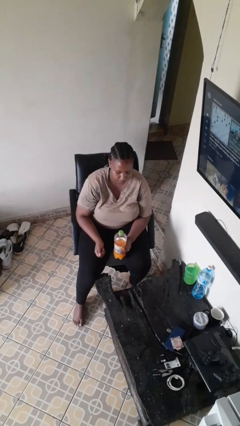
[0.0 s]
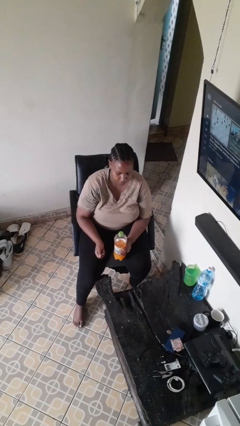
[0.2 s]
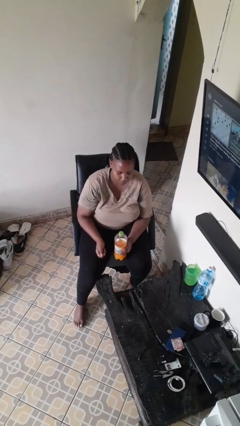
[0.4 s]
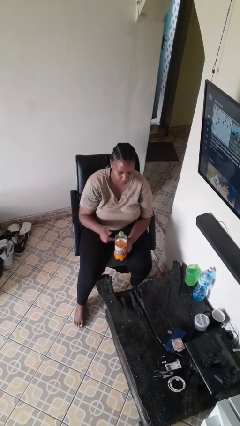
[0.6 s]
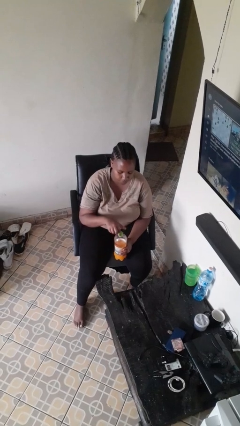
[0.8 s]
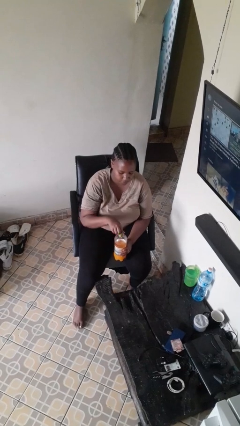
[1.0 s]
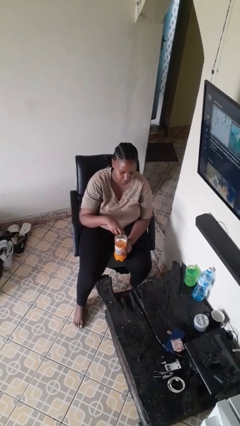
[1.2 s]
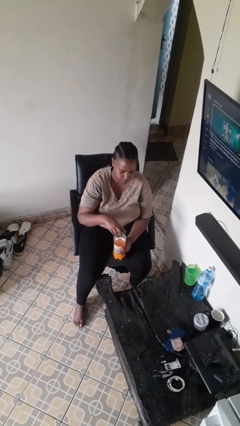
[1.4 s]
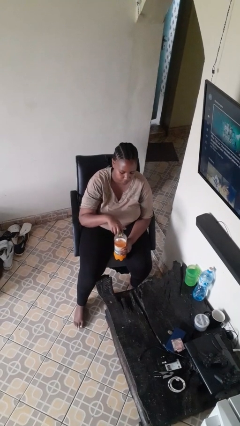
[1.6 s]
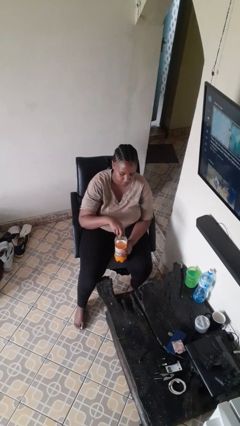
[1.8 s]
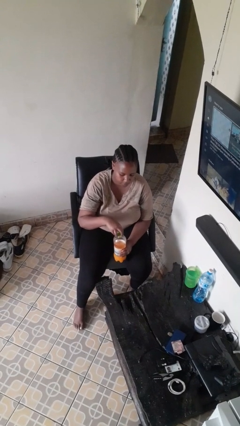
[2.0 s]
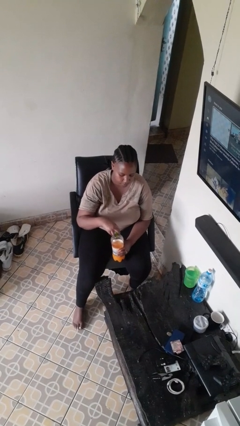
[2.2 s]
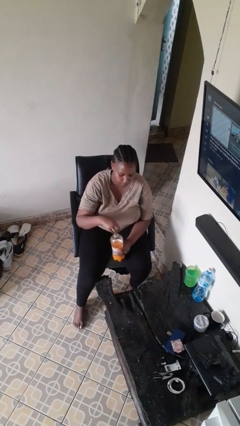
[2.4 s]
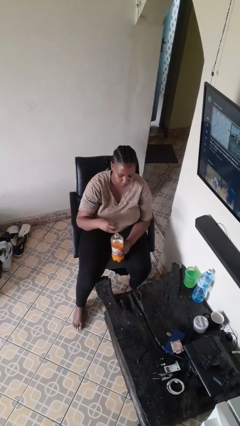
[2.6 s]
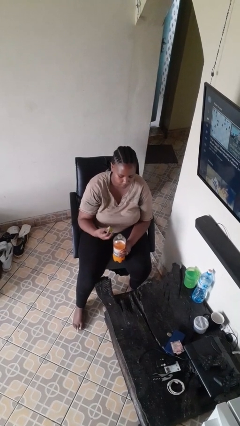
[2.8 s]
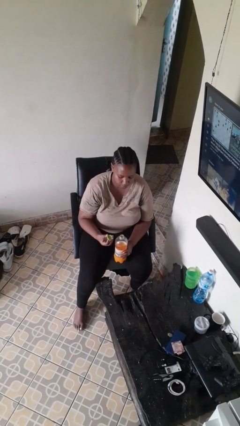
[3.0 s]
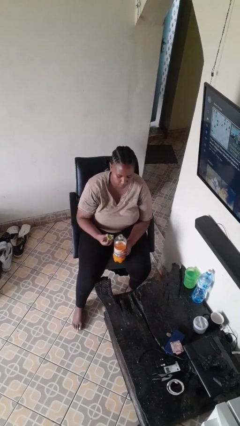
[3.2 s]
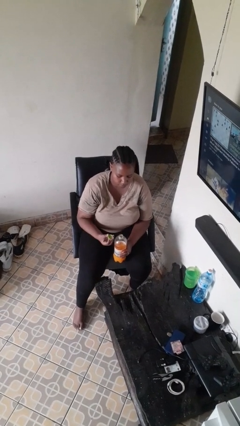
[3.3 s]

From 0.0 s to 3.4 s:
person unscrews lid from bottle

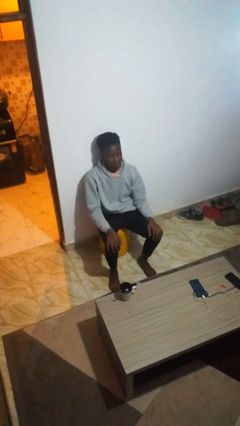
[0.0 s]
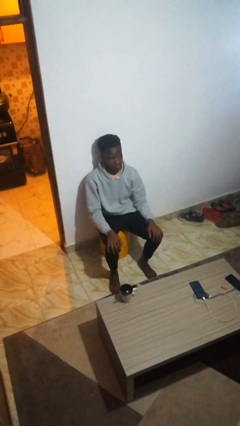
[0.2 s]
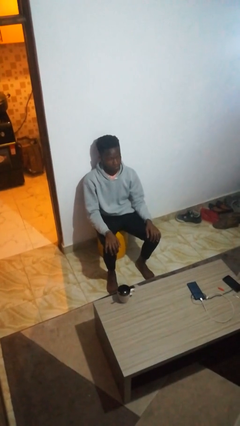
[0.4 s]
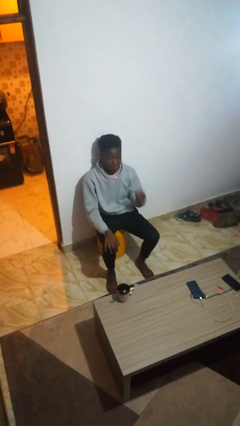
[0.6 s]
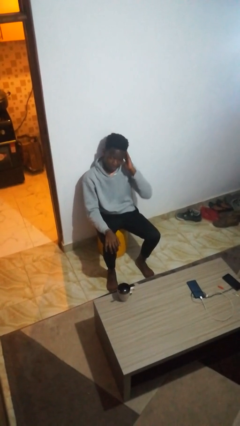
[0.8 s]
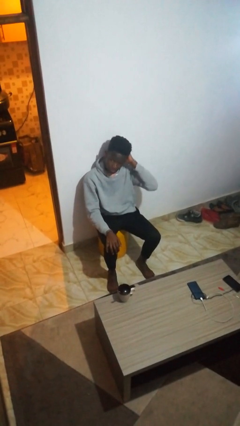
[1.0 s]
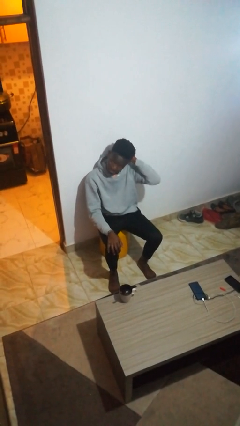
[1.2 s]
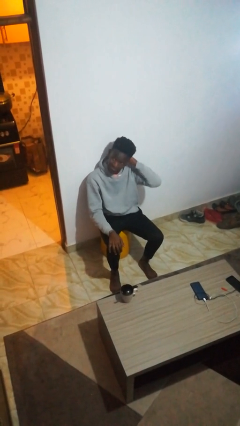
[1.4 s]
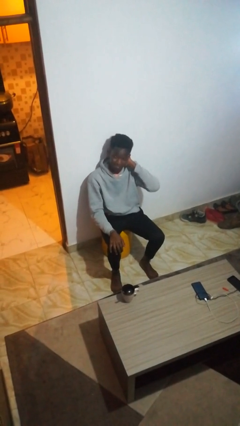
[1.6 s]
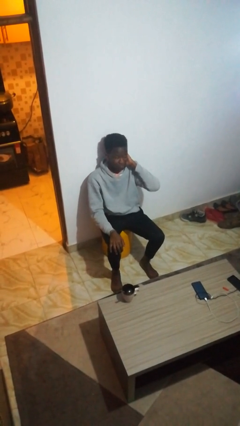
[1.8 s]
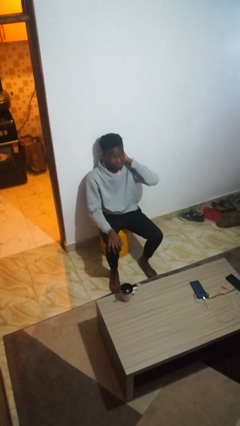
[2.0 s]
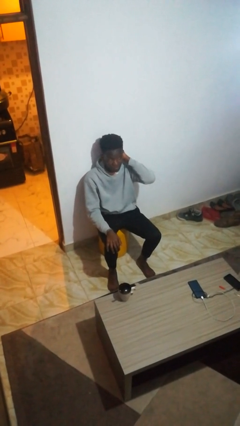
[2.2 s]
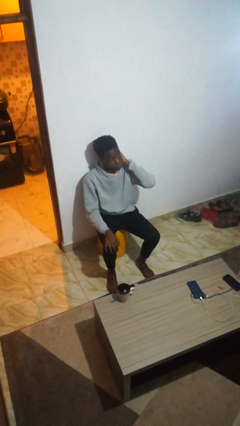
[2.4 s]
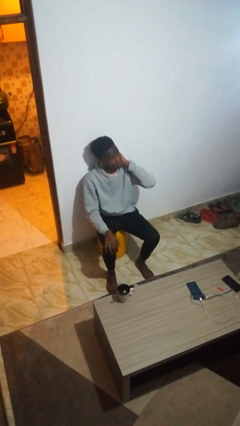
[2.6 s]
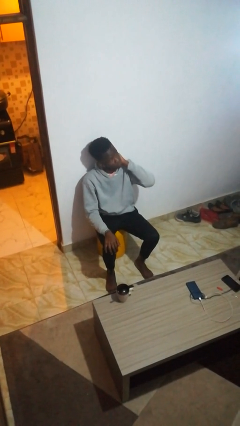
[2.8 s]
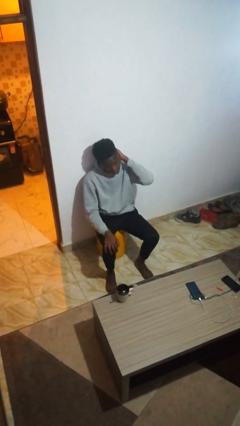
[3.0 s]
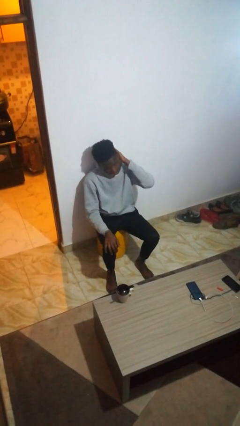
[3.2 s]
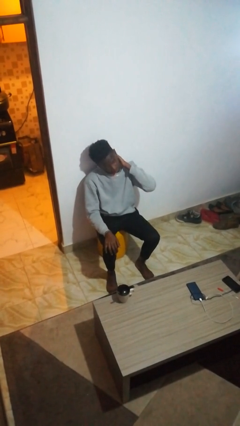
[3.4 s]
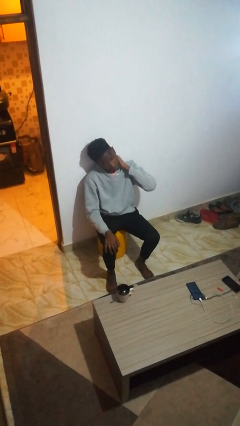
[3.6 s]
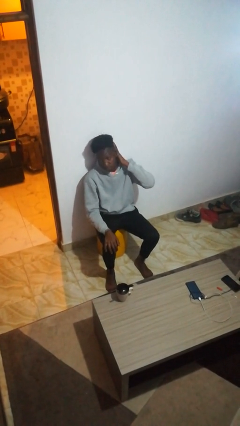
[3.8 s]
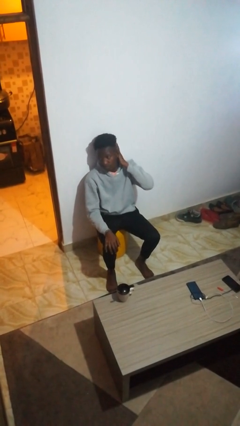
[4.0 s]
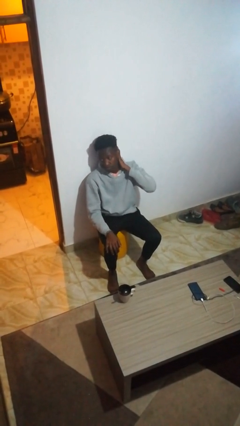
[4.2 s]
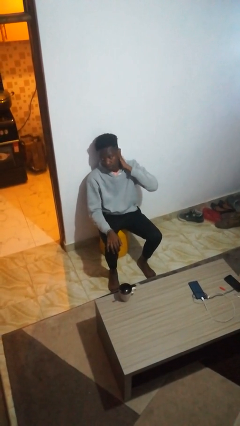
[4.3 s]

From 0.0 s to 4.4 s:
person strokes hair

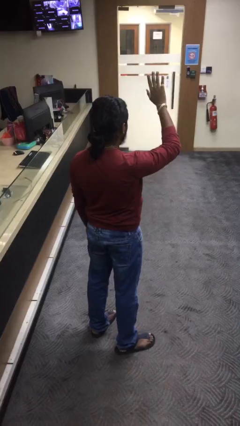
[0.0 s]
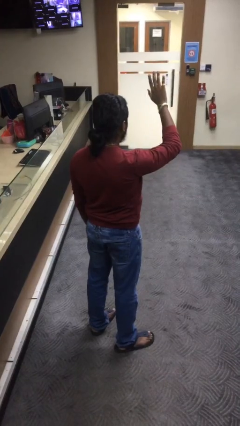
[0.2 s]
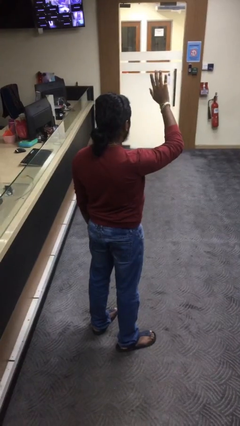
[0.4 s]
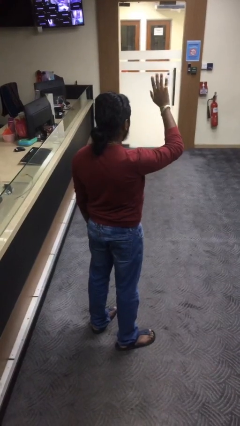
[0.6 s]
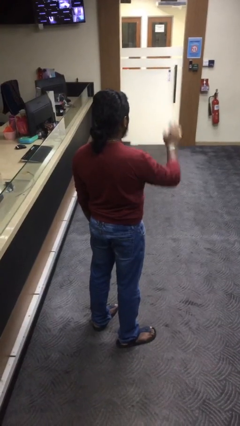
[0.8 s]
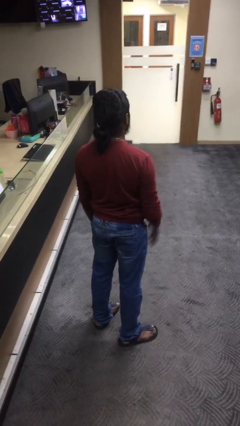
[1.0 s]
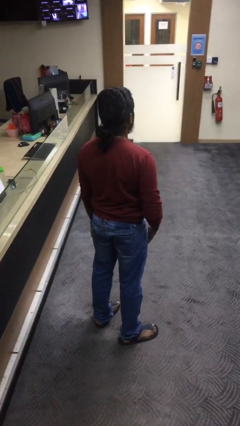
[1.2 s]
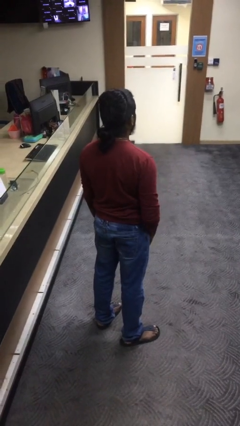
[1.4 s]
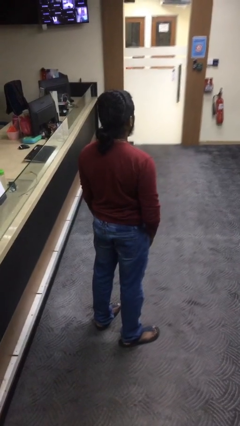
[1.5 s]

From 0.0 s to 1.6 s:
person gestures lower hand

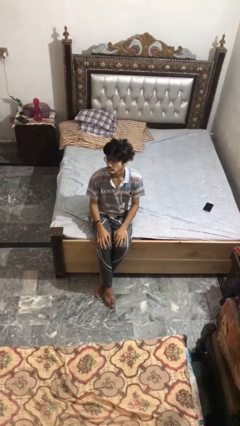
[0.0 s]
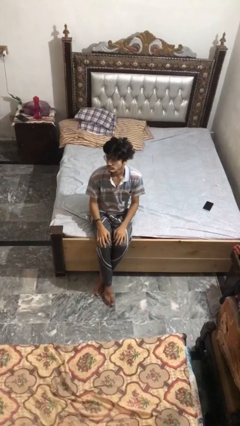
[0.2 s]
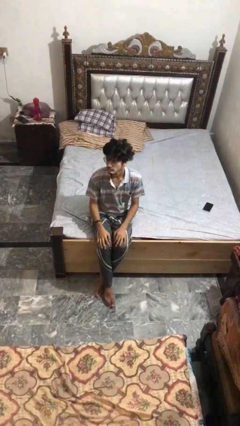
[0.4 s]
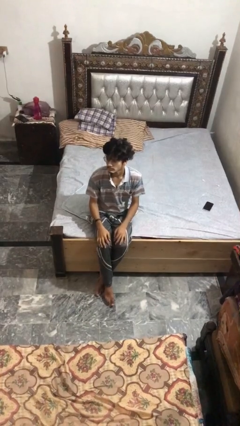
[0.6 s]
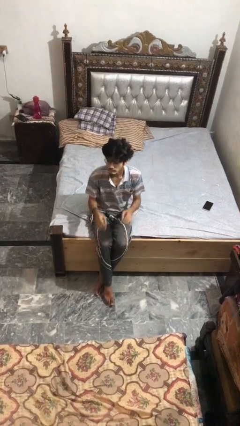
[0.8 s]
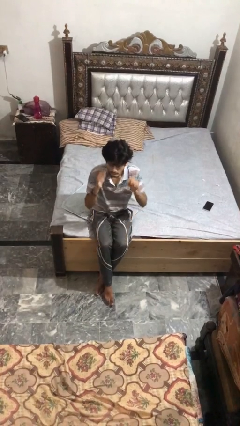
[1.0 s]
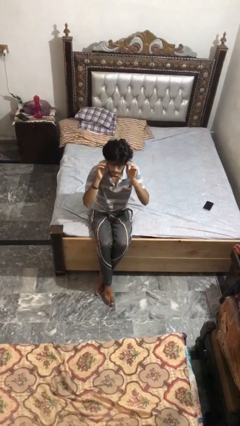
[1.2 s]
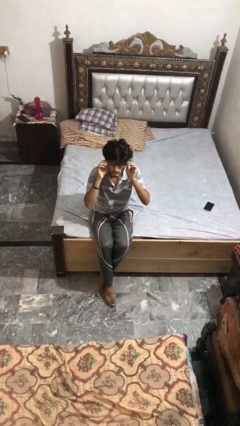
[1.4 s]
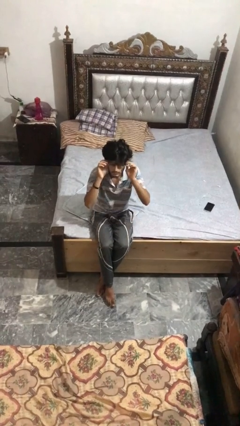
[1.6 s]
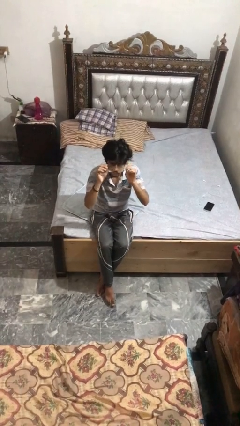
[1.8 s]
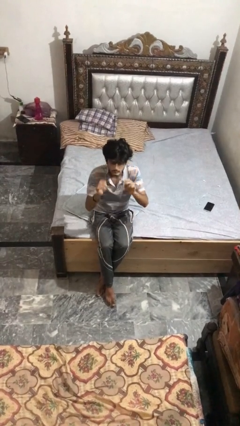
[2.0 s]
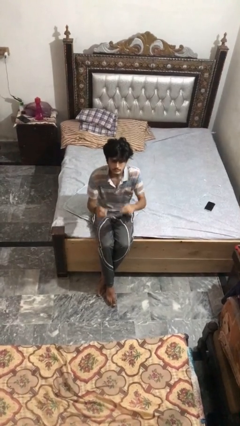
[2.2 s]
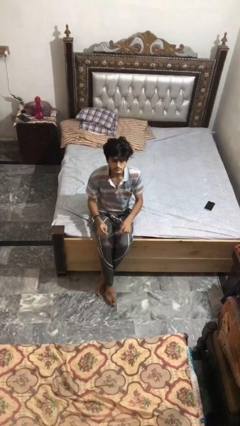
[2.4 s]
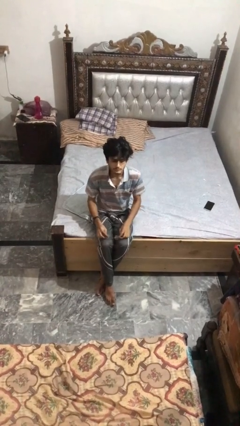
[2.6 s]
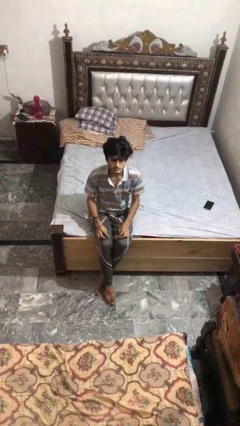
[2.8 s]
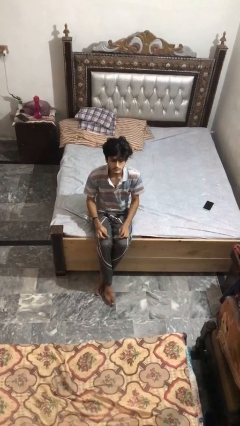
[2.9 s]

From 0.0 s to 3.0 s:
person takes off glasses

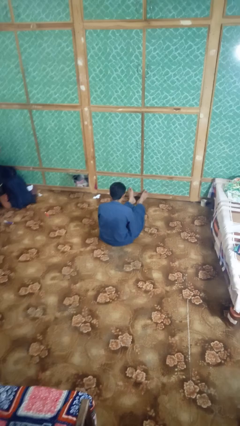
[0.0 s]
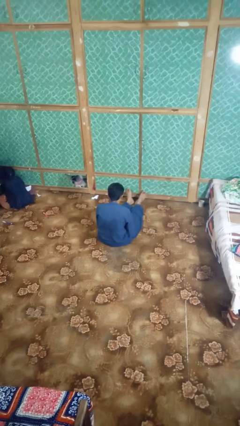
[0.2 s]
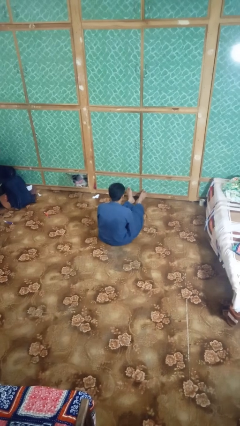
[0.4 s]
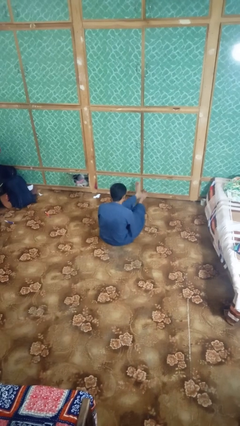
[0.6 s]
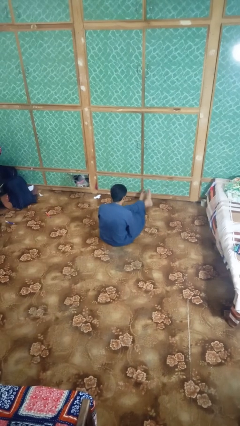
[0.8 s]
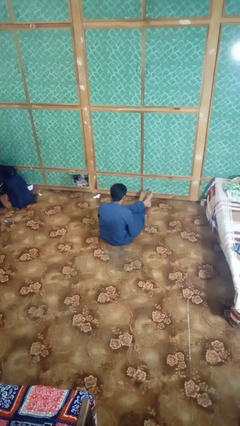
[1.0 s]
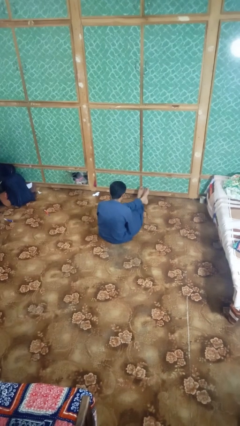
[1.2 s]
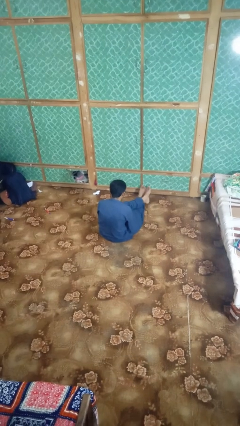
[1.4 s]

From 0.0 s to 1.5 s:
person crosses legs

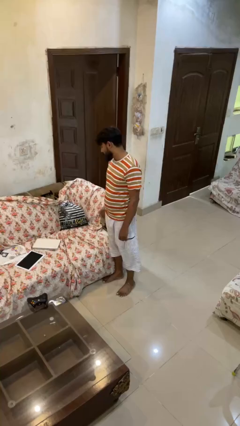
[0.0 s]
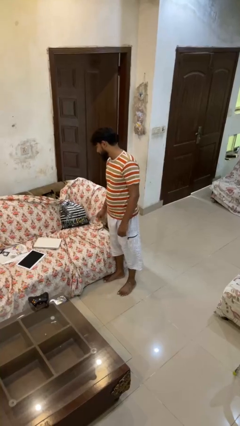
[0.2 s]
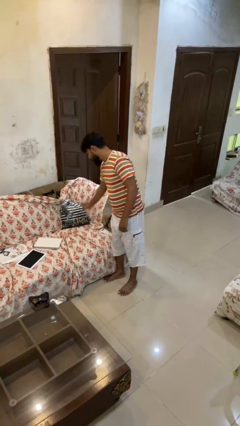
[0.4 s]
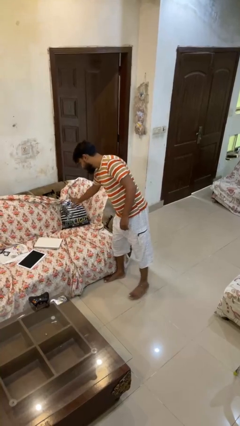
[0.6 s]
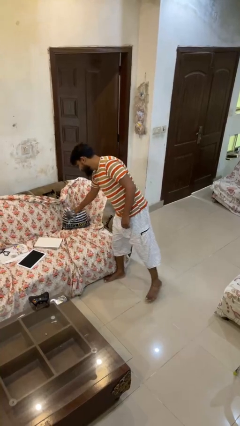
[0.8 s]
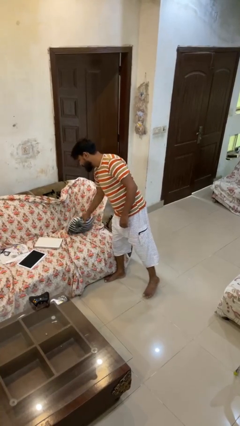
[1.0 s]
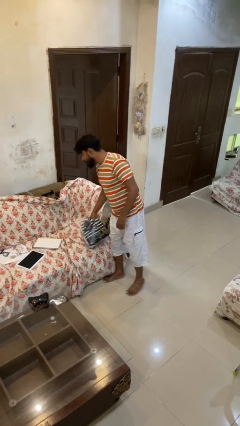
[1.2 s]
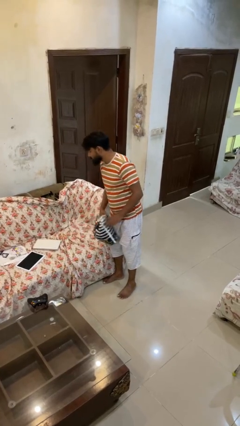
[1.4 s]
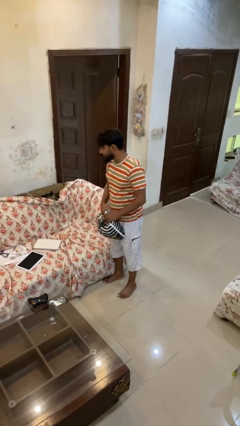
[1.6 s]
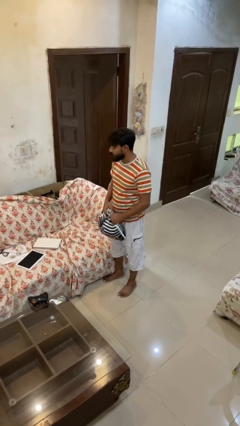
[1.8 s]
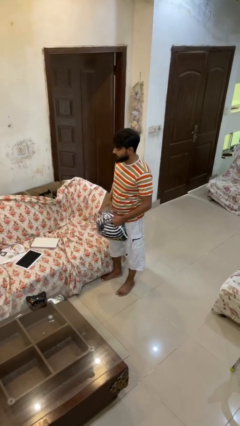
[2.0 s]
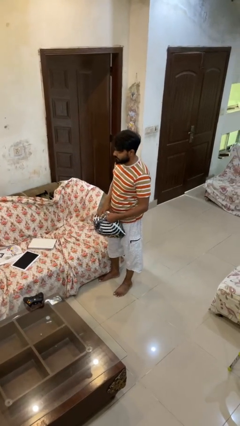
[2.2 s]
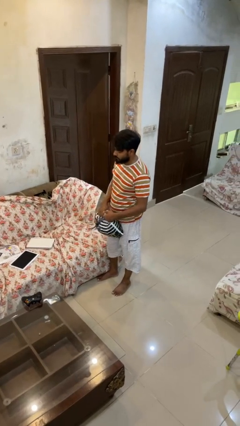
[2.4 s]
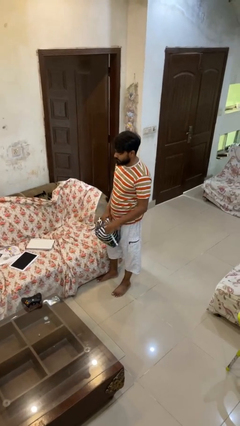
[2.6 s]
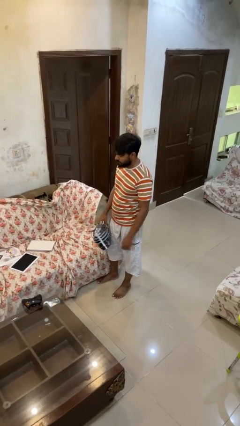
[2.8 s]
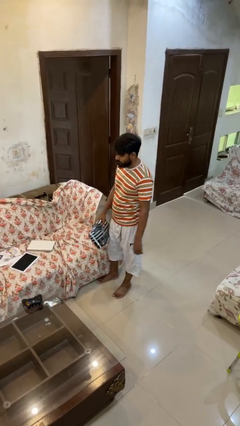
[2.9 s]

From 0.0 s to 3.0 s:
person picks up object from couch

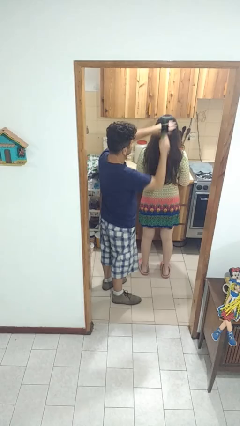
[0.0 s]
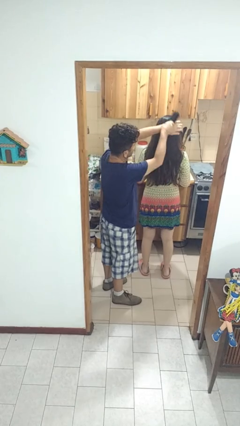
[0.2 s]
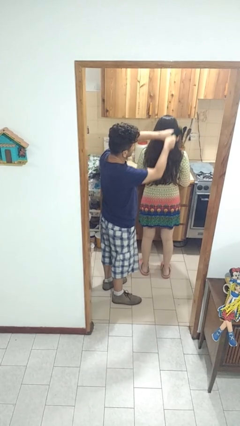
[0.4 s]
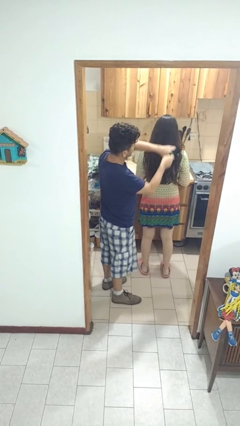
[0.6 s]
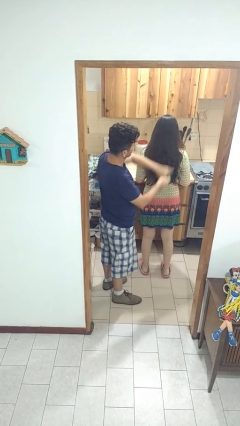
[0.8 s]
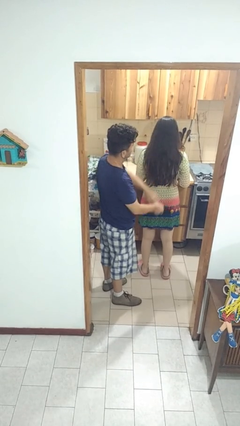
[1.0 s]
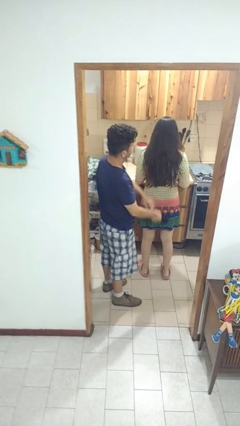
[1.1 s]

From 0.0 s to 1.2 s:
person brushes hair of person
